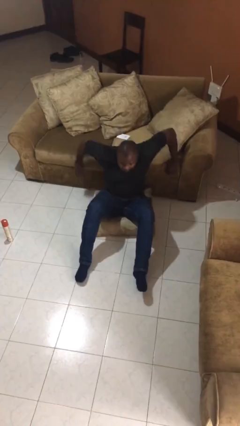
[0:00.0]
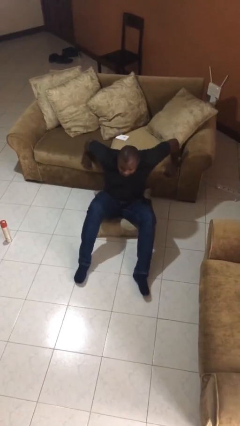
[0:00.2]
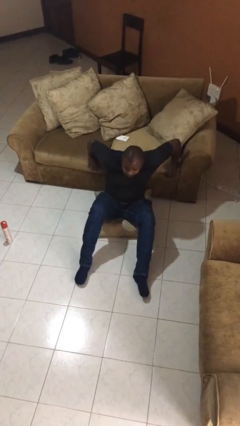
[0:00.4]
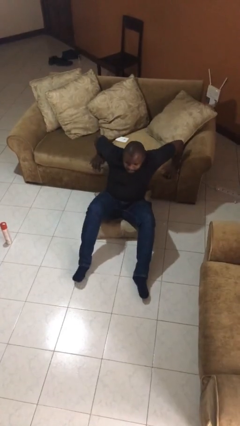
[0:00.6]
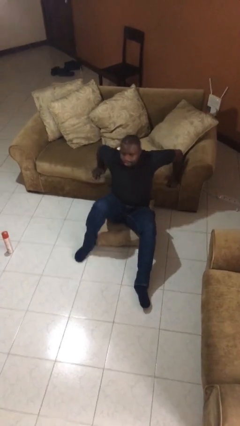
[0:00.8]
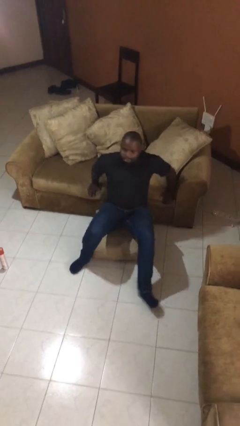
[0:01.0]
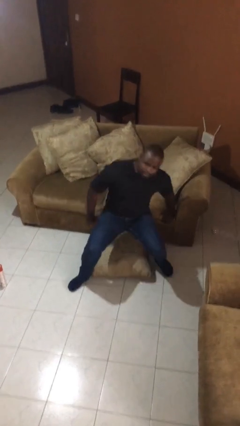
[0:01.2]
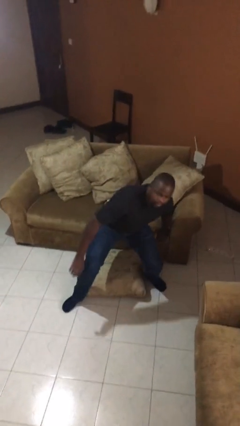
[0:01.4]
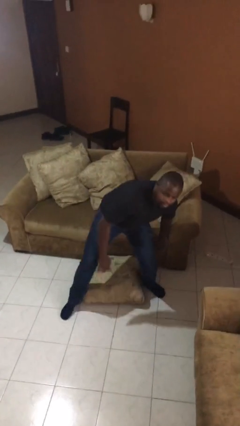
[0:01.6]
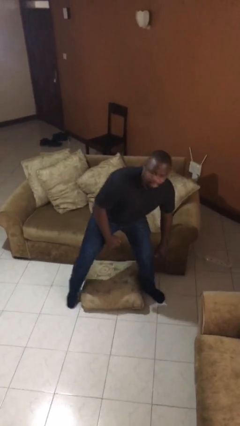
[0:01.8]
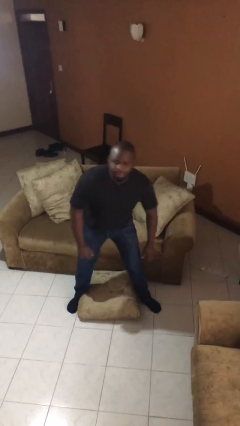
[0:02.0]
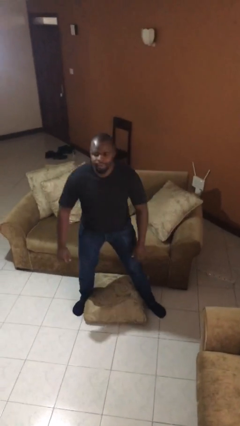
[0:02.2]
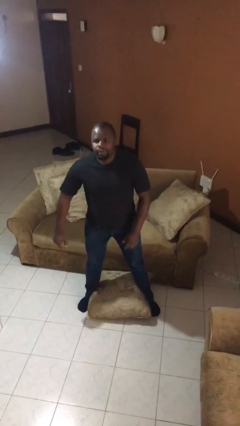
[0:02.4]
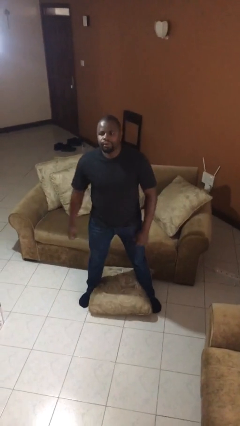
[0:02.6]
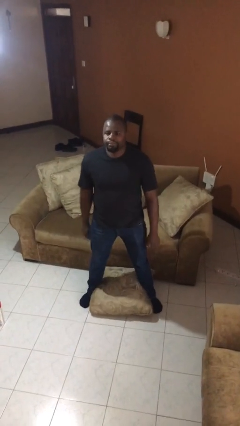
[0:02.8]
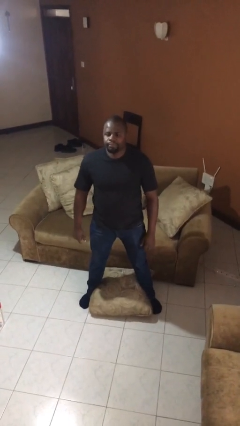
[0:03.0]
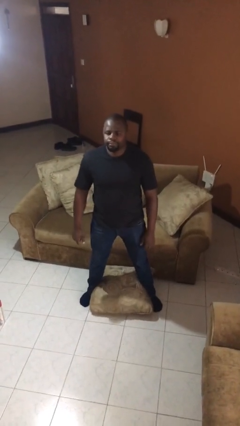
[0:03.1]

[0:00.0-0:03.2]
person stands up from floor

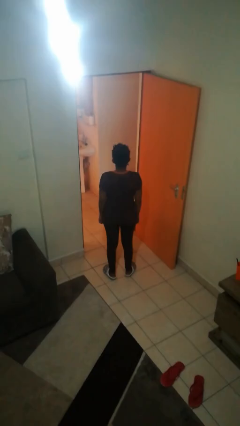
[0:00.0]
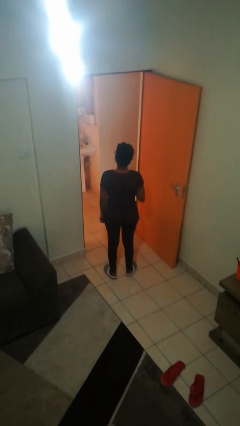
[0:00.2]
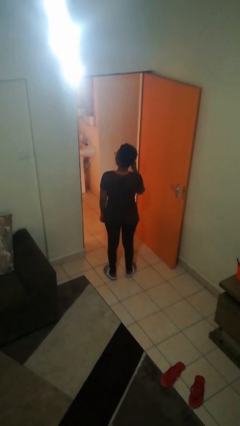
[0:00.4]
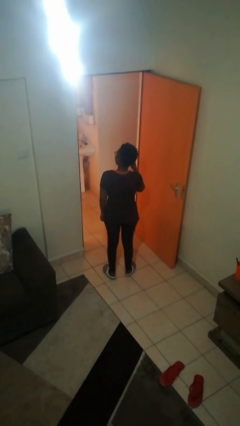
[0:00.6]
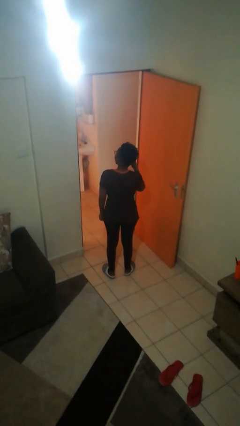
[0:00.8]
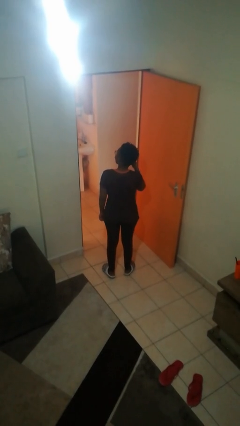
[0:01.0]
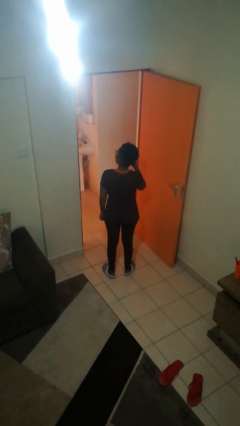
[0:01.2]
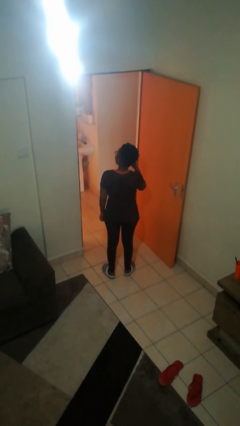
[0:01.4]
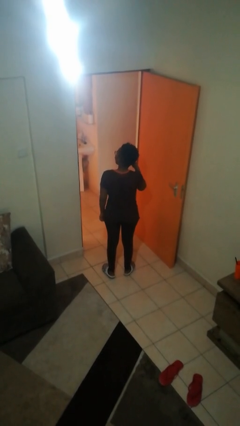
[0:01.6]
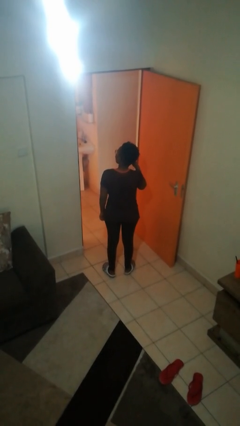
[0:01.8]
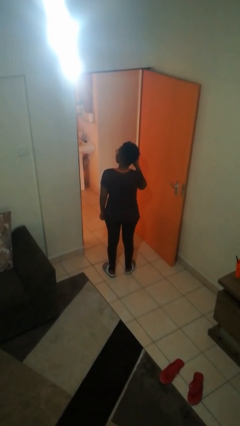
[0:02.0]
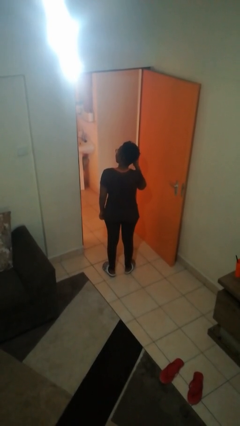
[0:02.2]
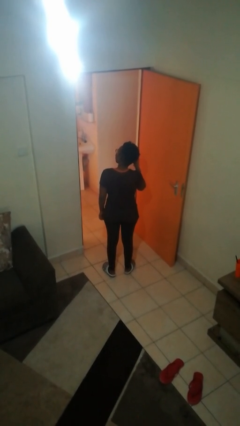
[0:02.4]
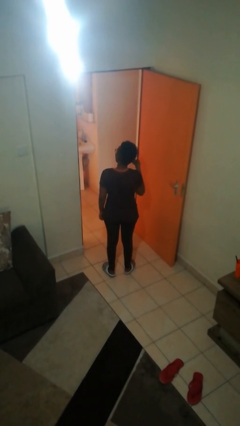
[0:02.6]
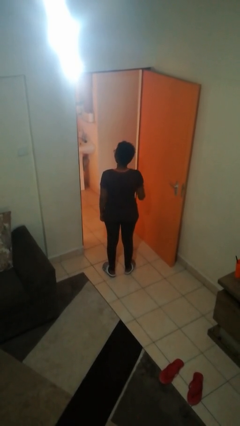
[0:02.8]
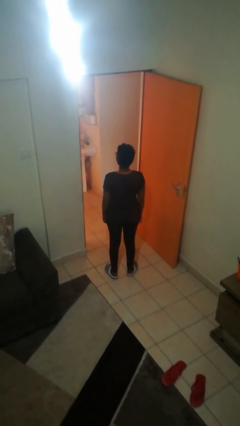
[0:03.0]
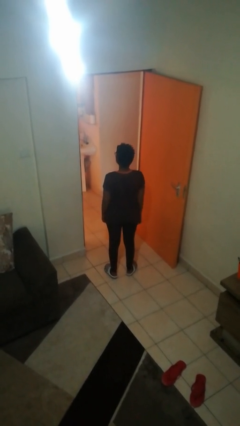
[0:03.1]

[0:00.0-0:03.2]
person takes off earrings

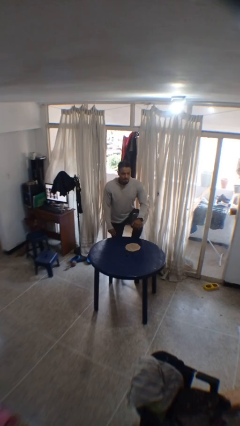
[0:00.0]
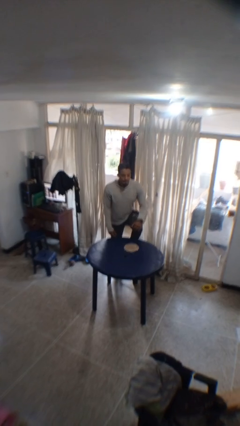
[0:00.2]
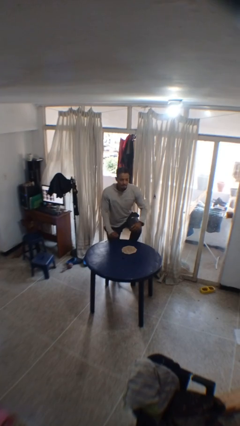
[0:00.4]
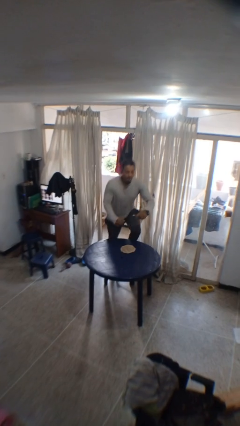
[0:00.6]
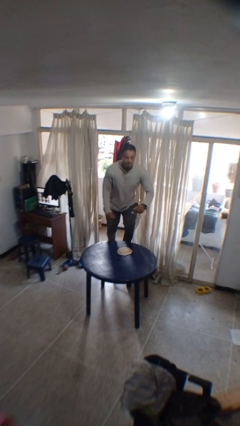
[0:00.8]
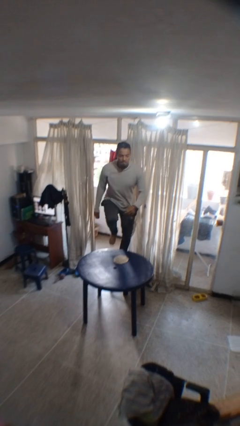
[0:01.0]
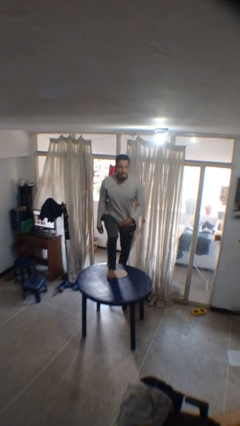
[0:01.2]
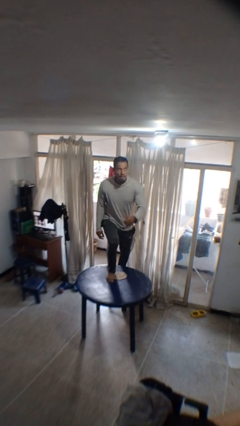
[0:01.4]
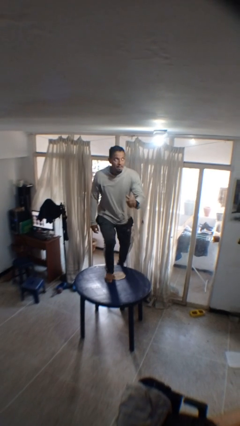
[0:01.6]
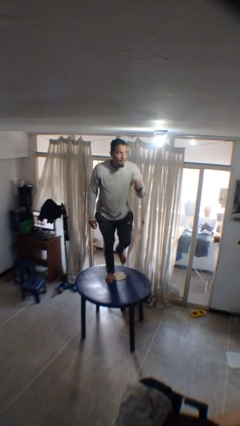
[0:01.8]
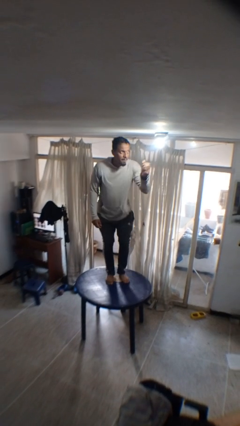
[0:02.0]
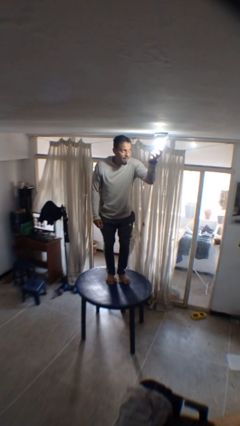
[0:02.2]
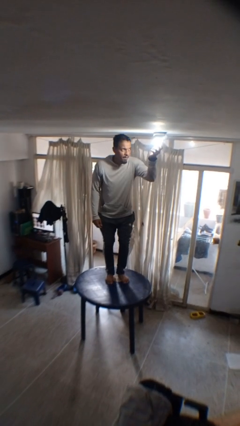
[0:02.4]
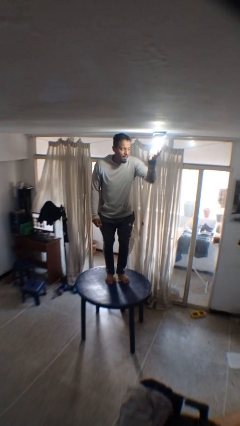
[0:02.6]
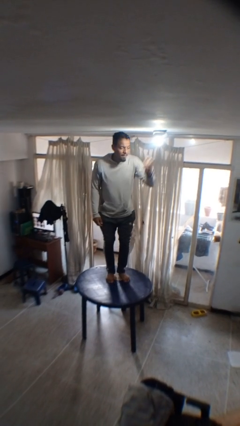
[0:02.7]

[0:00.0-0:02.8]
person climbs on table

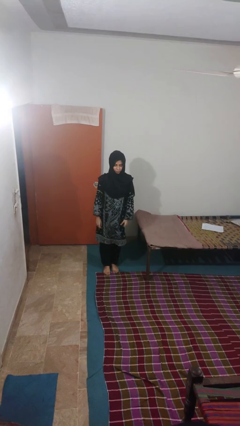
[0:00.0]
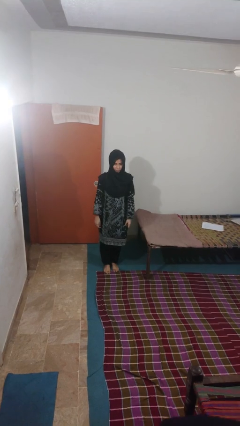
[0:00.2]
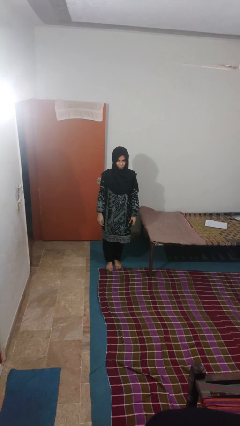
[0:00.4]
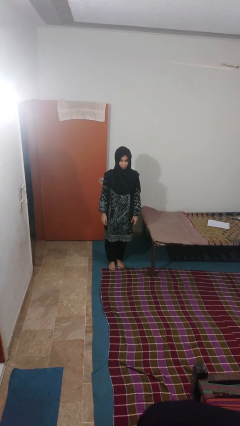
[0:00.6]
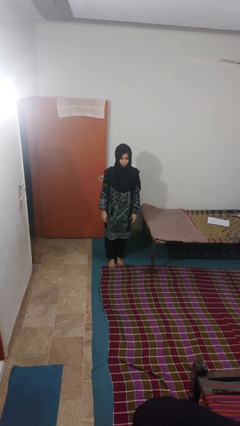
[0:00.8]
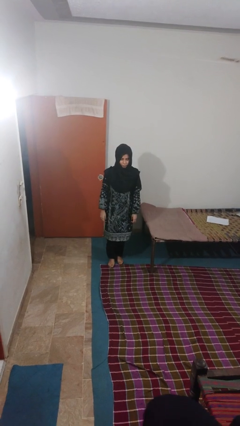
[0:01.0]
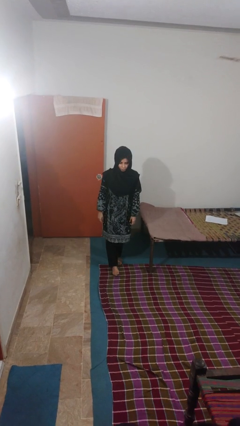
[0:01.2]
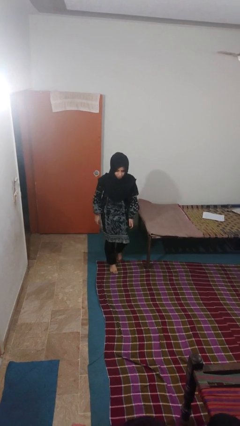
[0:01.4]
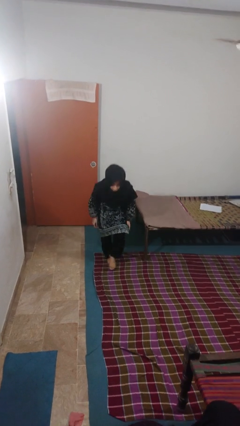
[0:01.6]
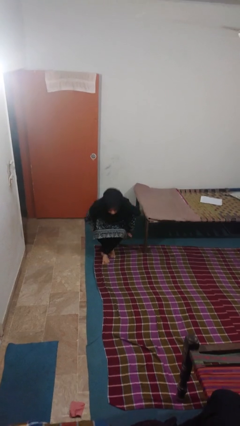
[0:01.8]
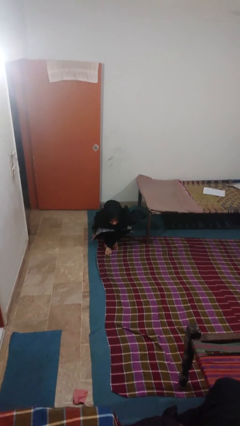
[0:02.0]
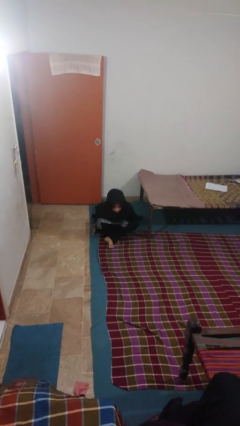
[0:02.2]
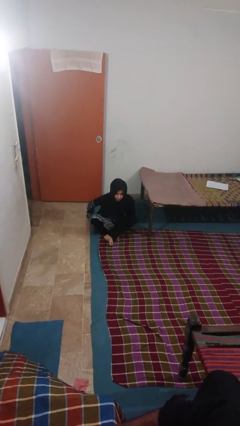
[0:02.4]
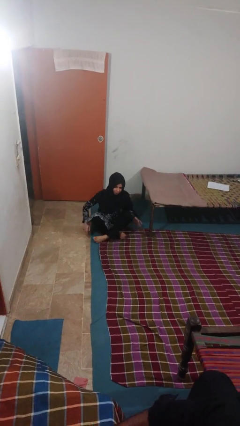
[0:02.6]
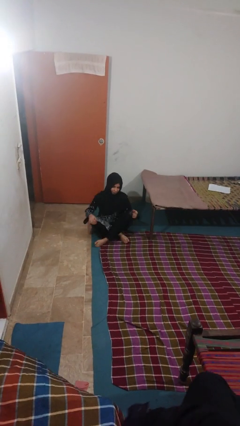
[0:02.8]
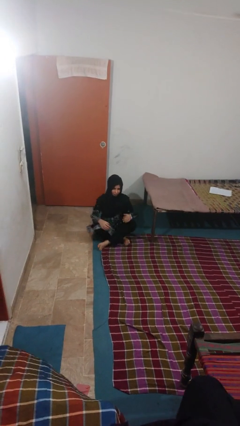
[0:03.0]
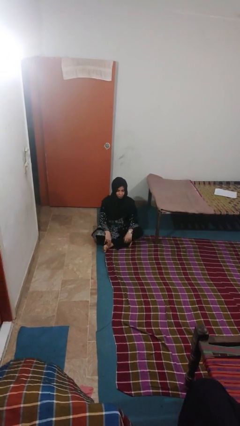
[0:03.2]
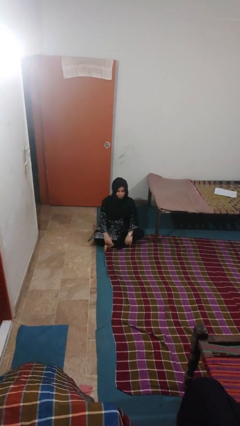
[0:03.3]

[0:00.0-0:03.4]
person sits crisscross

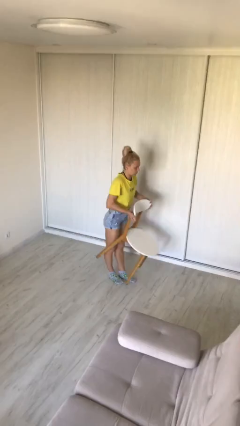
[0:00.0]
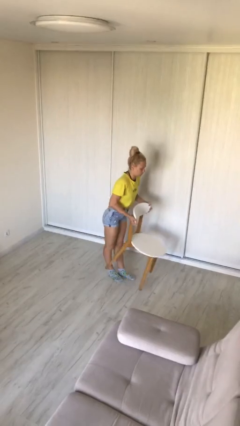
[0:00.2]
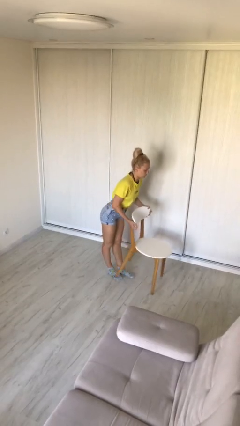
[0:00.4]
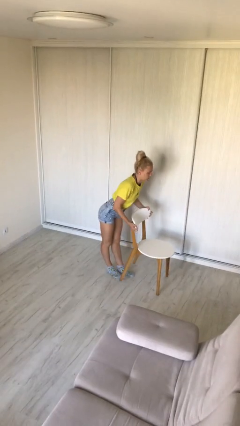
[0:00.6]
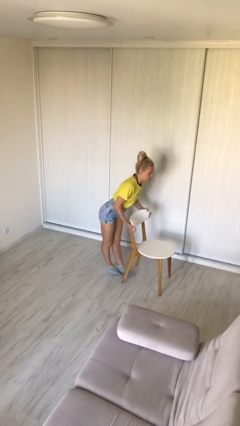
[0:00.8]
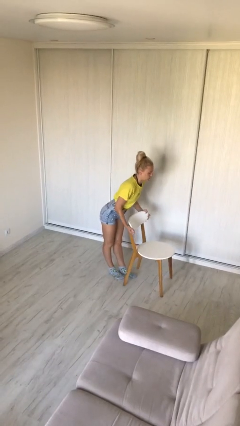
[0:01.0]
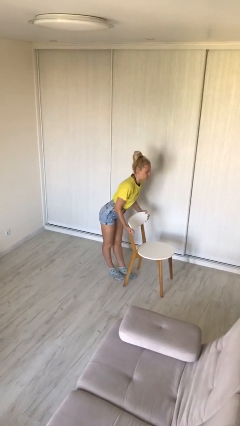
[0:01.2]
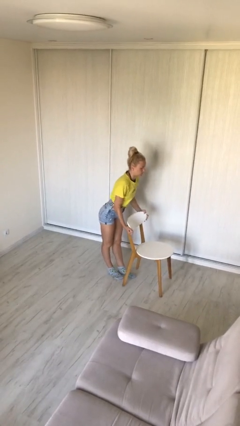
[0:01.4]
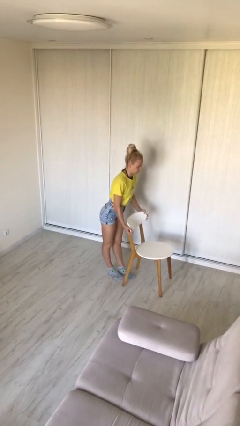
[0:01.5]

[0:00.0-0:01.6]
person puts down object on floor

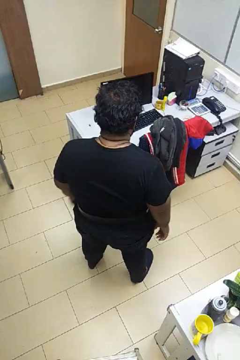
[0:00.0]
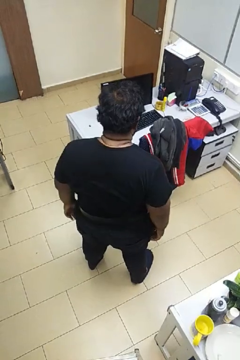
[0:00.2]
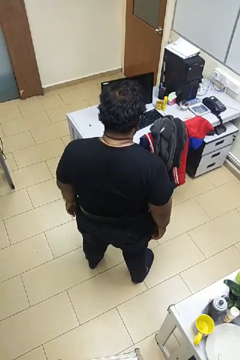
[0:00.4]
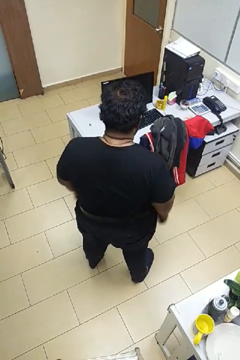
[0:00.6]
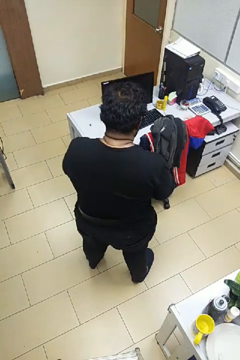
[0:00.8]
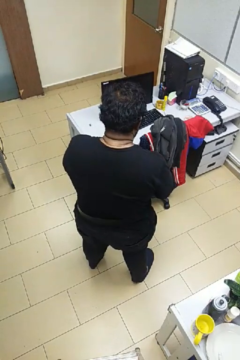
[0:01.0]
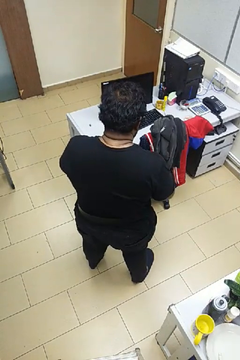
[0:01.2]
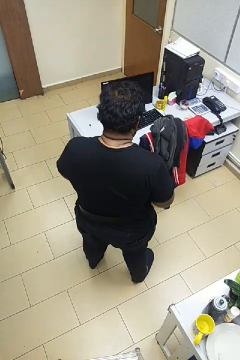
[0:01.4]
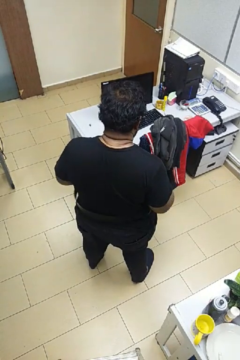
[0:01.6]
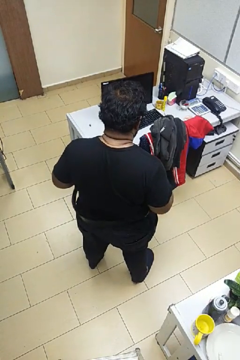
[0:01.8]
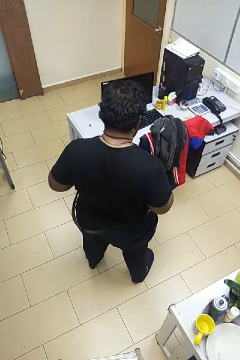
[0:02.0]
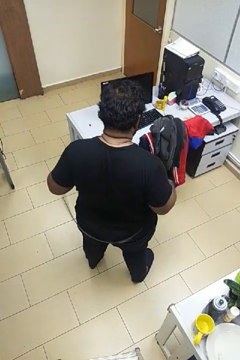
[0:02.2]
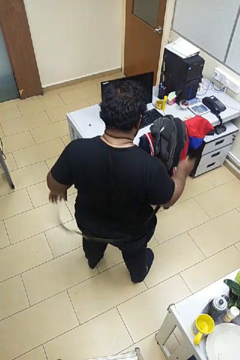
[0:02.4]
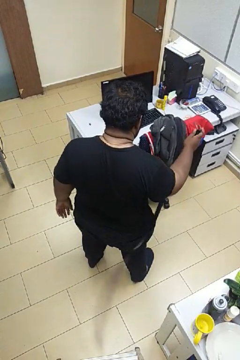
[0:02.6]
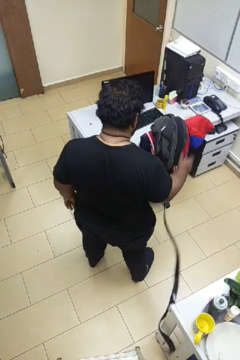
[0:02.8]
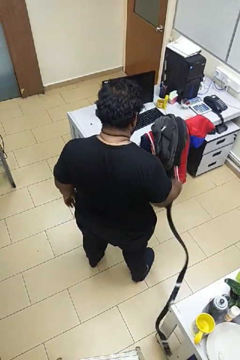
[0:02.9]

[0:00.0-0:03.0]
person takes off belt

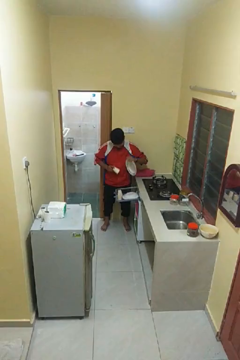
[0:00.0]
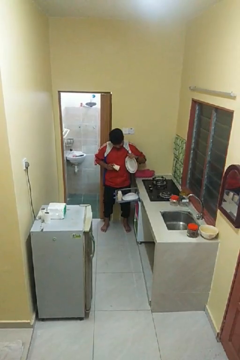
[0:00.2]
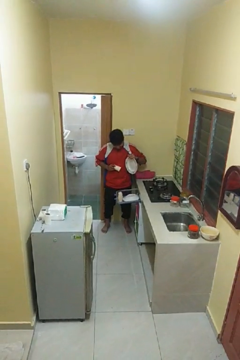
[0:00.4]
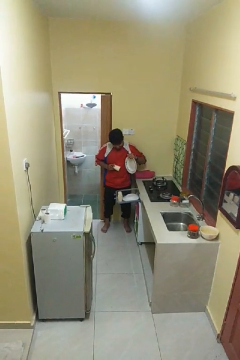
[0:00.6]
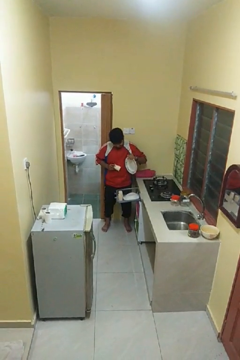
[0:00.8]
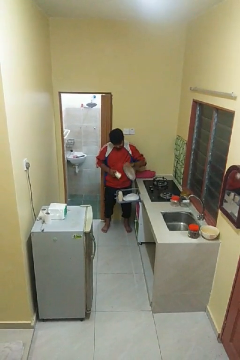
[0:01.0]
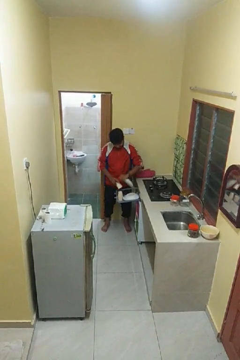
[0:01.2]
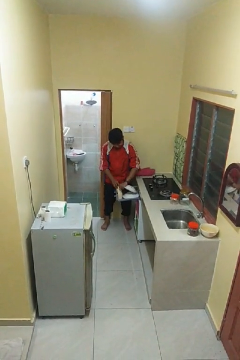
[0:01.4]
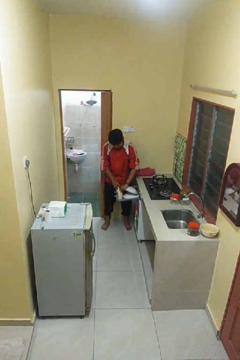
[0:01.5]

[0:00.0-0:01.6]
person puts object into kitchen drawer
